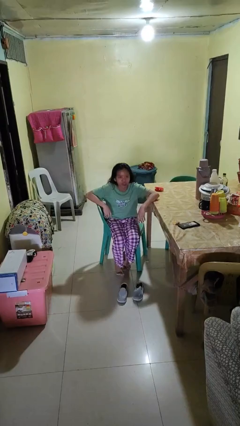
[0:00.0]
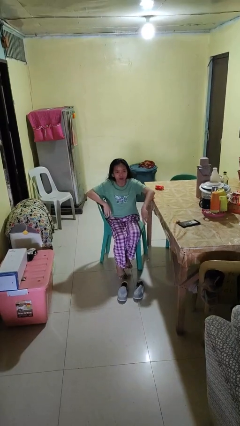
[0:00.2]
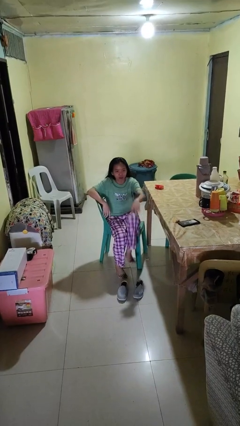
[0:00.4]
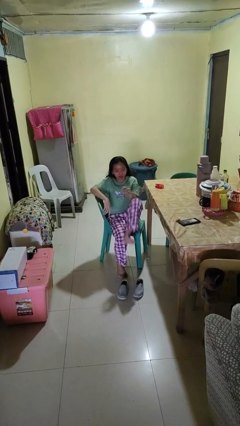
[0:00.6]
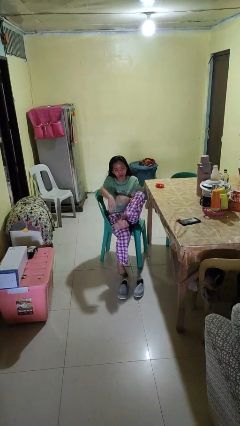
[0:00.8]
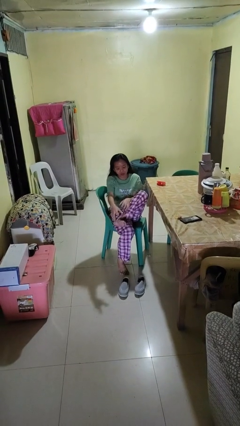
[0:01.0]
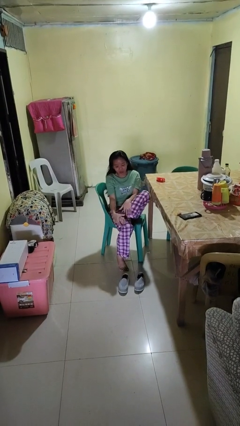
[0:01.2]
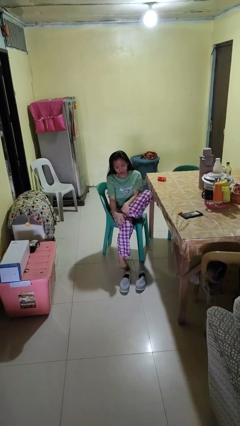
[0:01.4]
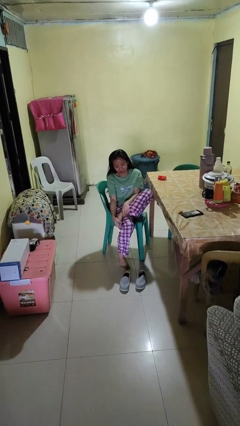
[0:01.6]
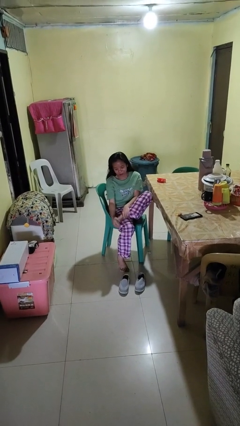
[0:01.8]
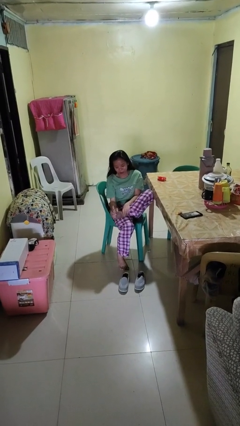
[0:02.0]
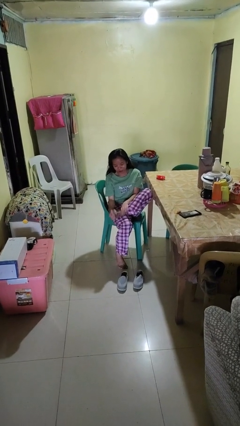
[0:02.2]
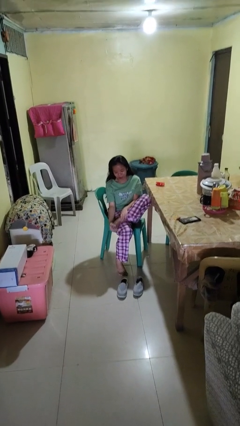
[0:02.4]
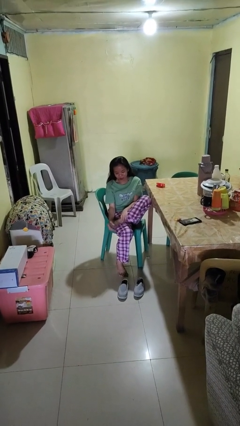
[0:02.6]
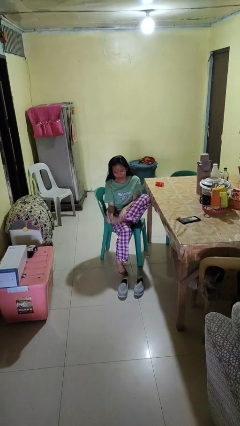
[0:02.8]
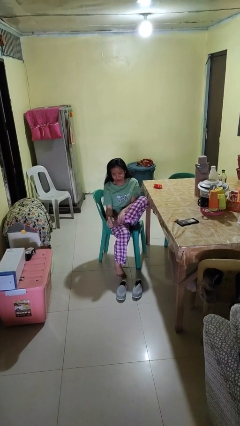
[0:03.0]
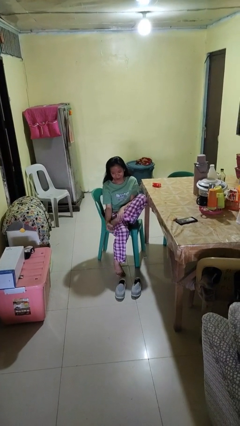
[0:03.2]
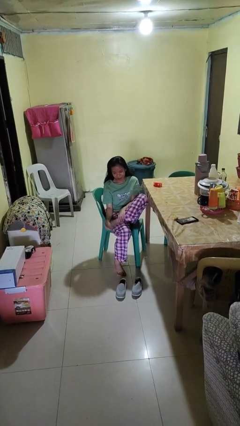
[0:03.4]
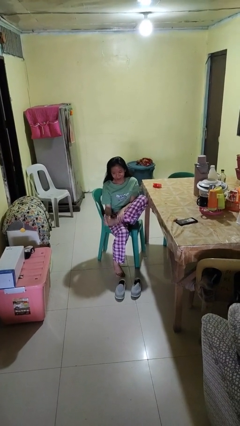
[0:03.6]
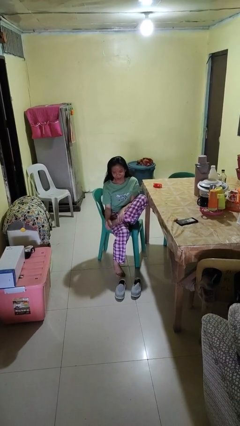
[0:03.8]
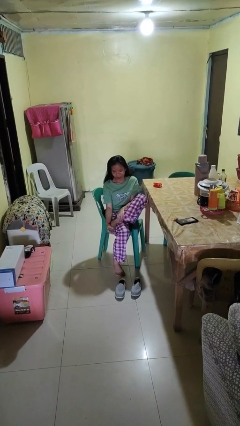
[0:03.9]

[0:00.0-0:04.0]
person rubs foot

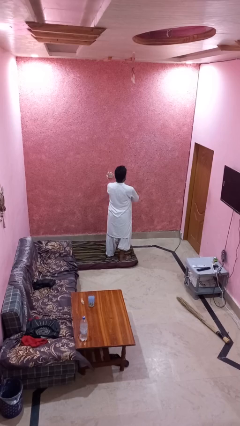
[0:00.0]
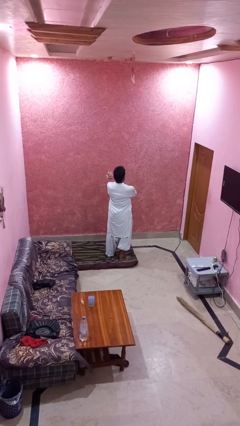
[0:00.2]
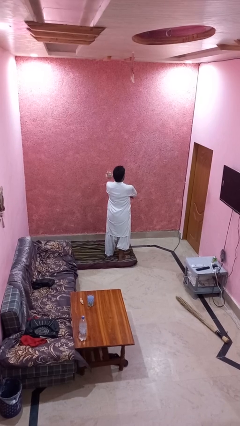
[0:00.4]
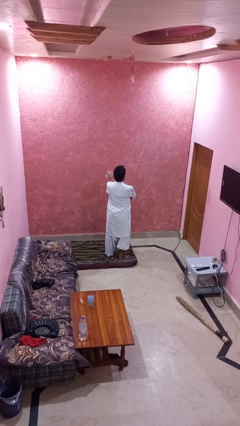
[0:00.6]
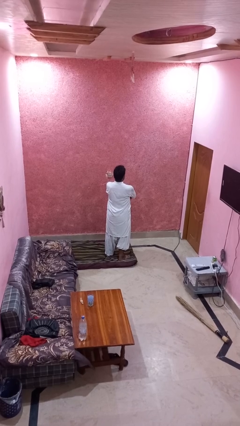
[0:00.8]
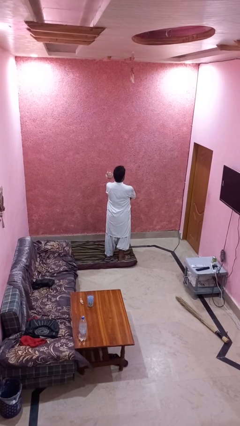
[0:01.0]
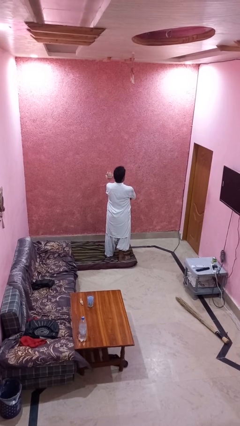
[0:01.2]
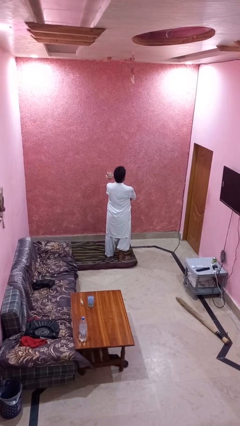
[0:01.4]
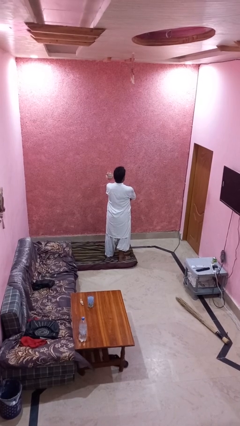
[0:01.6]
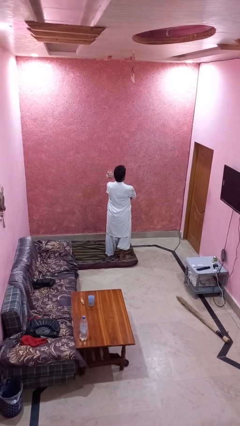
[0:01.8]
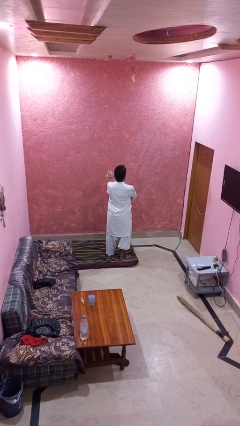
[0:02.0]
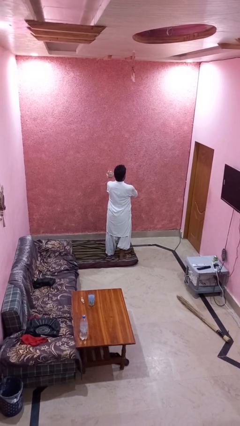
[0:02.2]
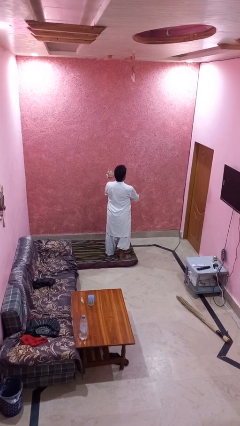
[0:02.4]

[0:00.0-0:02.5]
person crosses arms

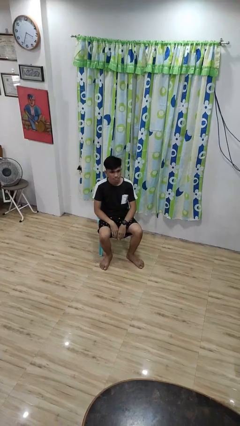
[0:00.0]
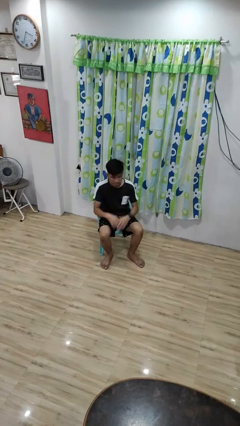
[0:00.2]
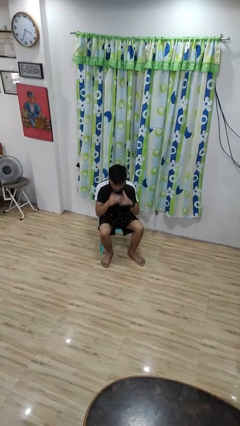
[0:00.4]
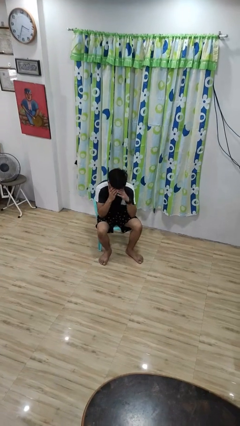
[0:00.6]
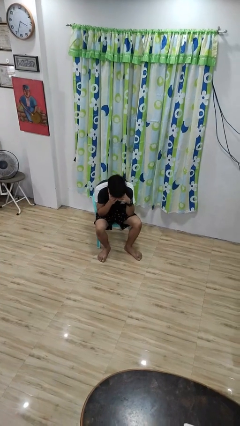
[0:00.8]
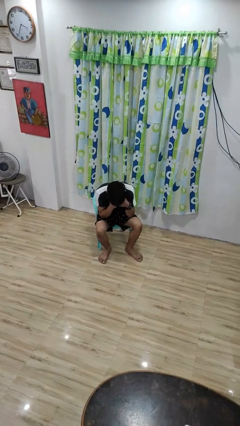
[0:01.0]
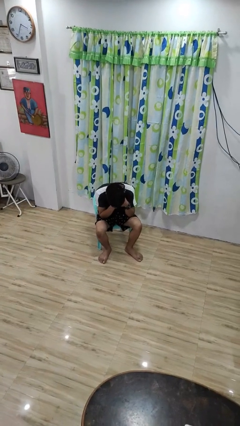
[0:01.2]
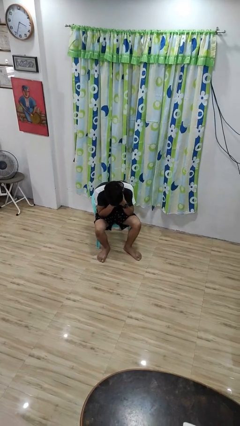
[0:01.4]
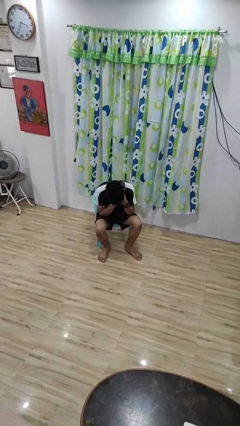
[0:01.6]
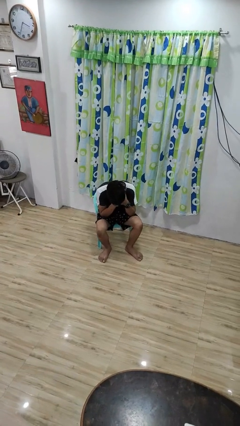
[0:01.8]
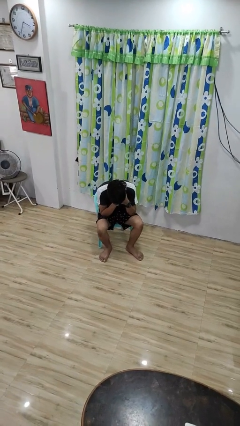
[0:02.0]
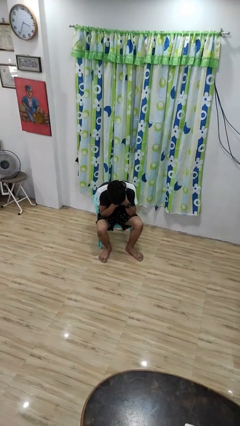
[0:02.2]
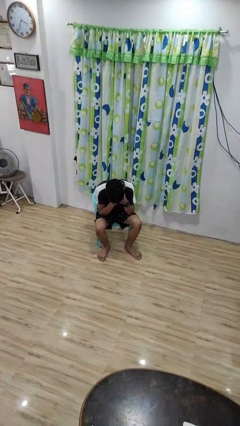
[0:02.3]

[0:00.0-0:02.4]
person covers face with hands

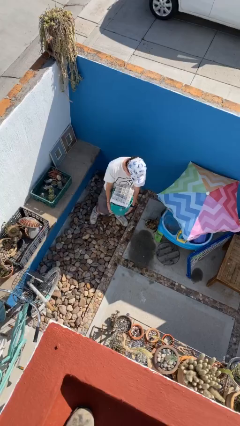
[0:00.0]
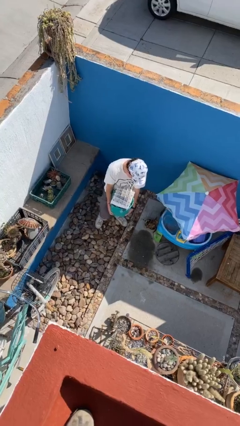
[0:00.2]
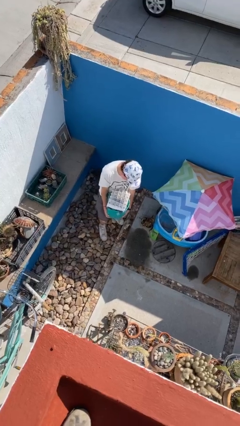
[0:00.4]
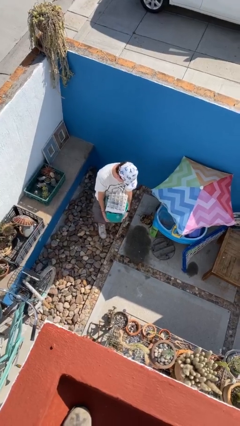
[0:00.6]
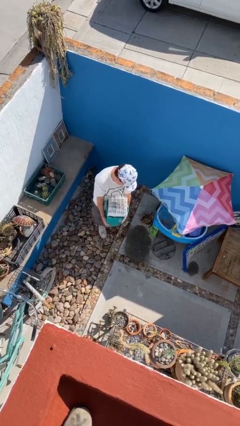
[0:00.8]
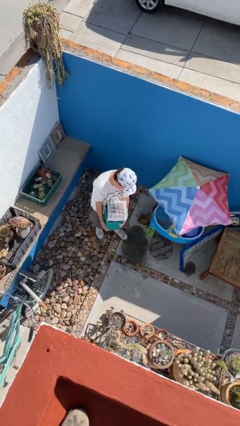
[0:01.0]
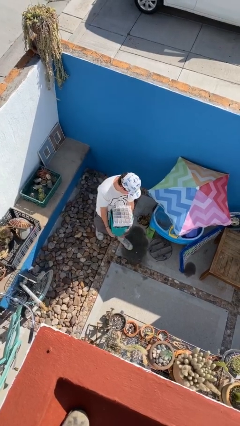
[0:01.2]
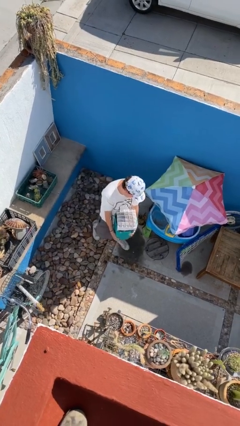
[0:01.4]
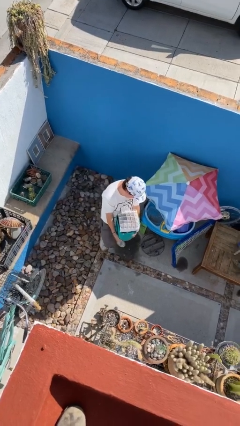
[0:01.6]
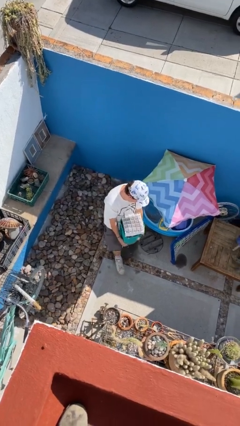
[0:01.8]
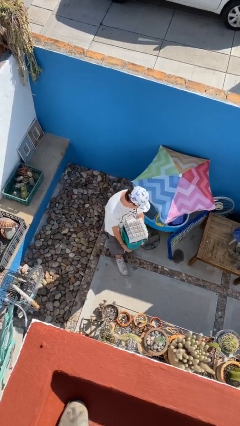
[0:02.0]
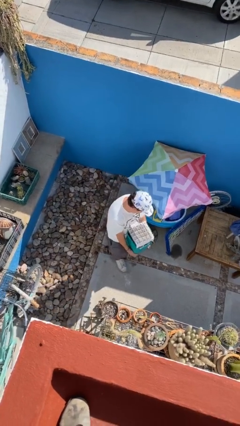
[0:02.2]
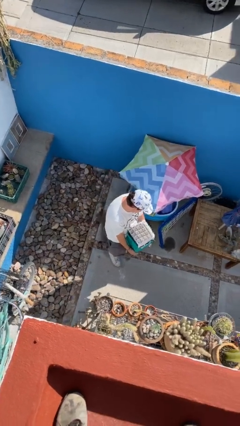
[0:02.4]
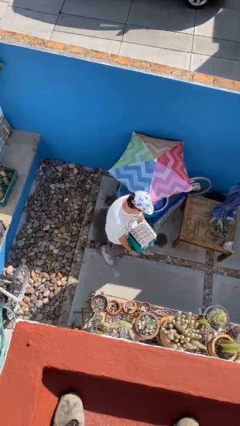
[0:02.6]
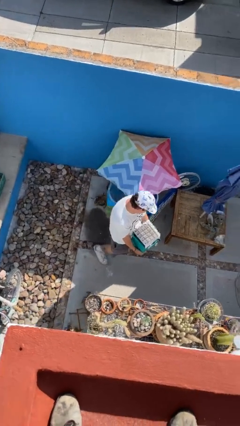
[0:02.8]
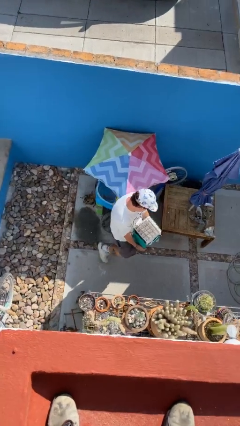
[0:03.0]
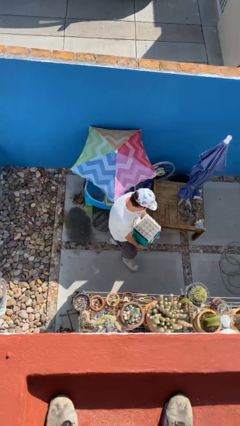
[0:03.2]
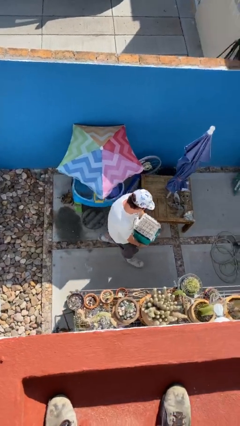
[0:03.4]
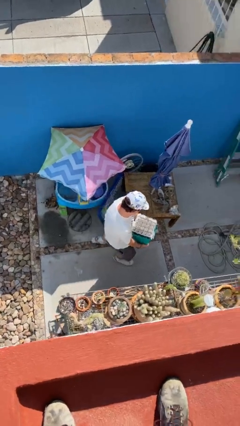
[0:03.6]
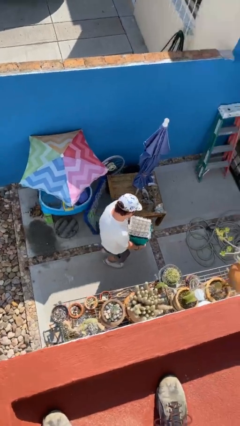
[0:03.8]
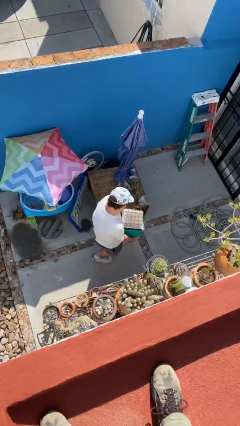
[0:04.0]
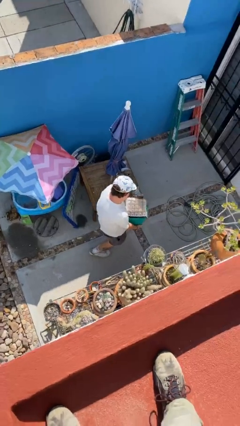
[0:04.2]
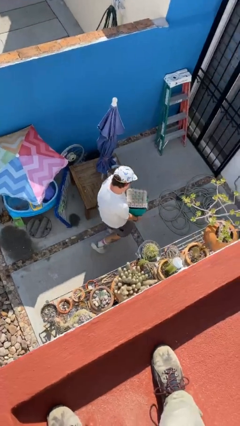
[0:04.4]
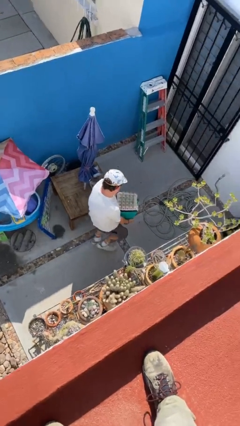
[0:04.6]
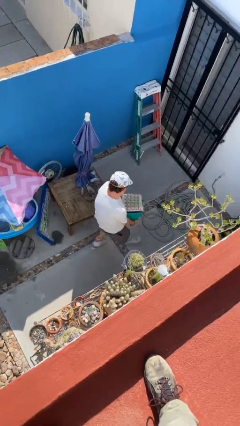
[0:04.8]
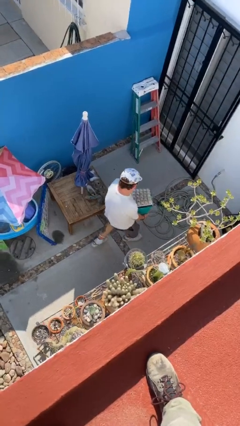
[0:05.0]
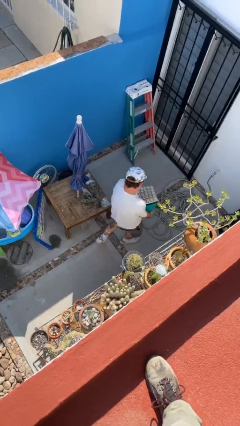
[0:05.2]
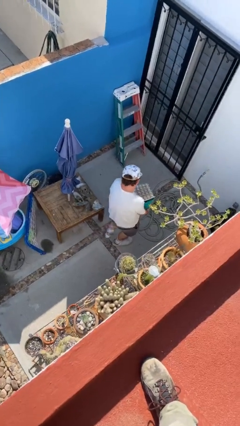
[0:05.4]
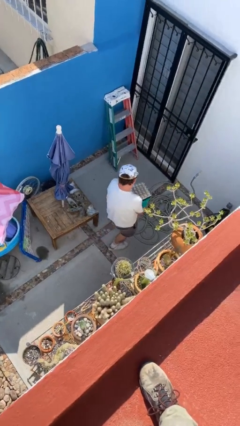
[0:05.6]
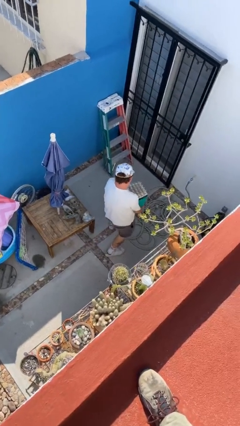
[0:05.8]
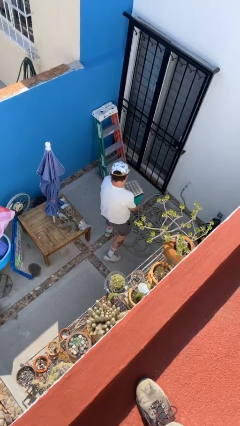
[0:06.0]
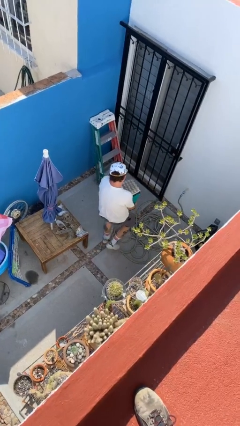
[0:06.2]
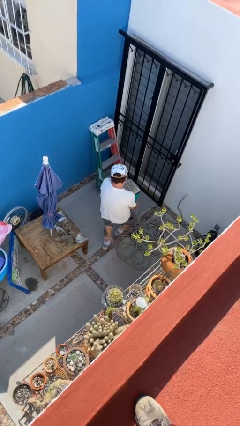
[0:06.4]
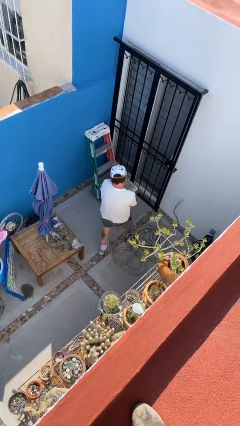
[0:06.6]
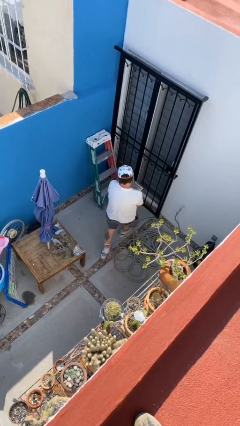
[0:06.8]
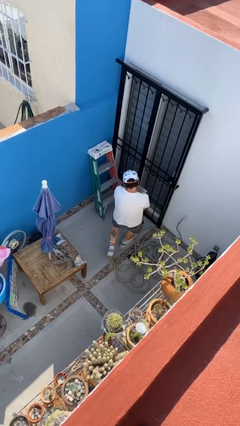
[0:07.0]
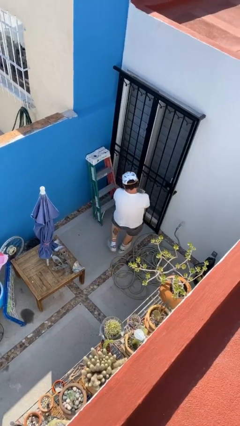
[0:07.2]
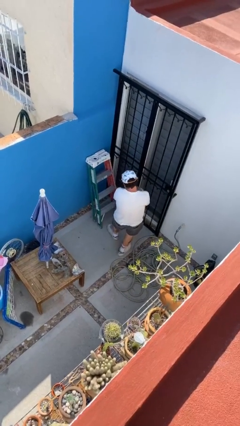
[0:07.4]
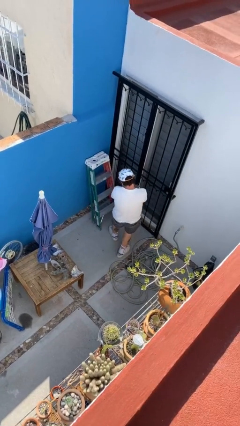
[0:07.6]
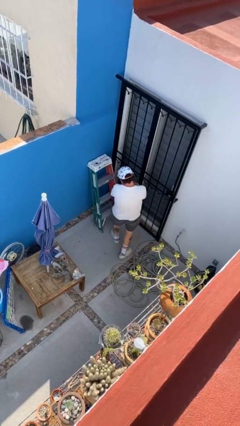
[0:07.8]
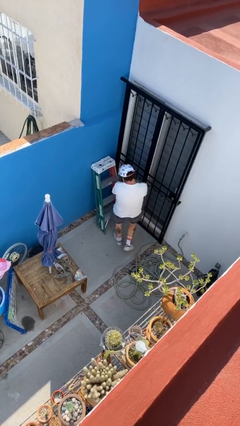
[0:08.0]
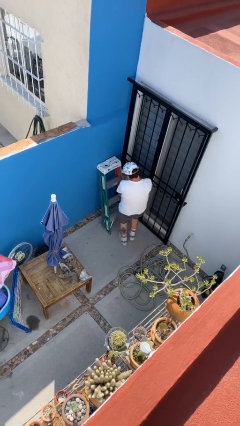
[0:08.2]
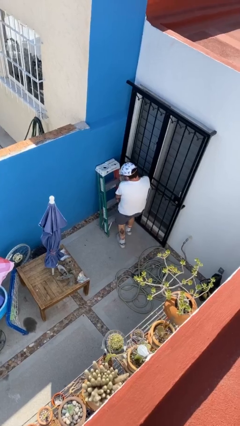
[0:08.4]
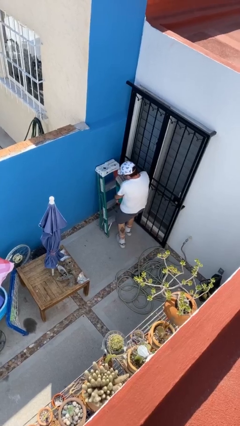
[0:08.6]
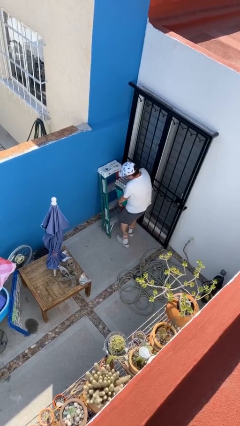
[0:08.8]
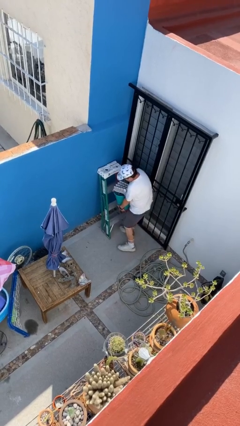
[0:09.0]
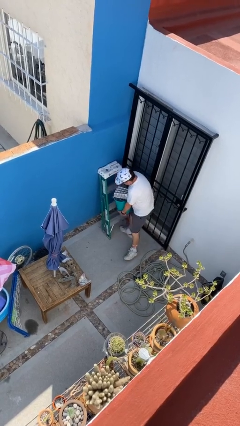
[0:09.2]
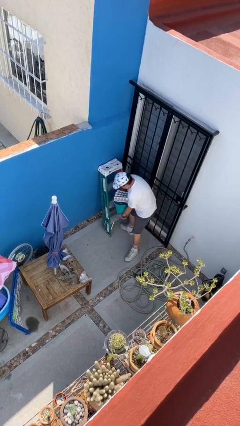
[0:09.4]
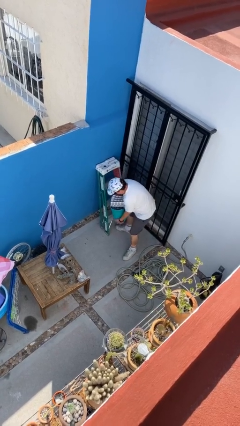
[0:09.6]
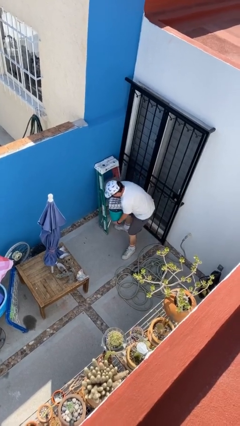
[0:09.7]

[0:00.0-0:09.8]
person carries heavy object
